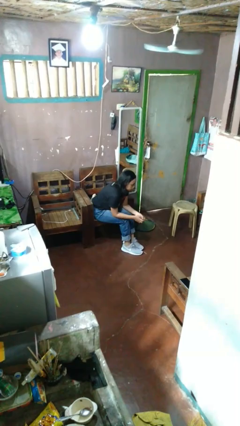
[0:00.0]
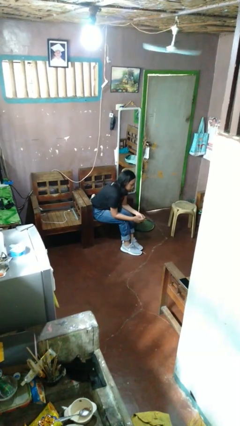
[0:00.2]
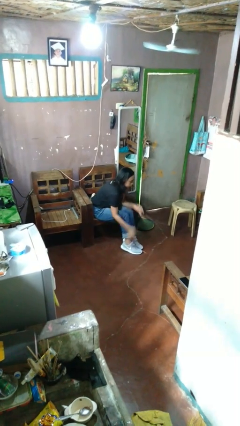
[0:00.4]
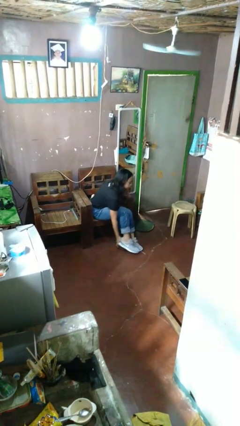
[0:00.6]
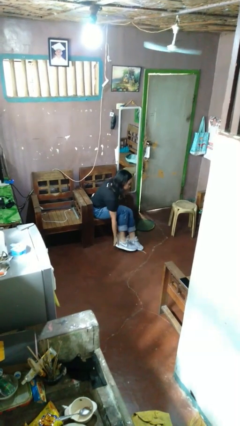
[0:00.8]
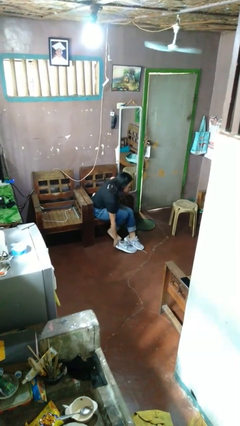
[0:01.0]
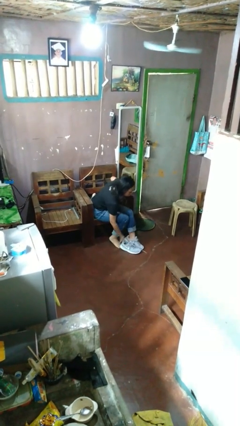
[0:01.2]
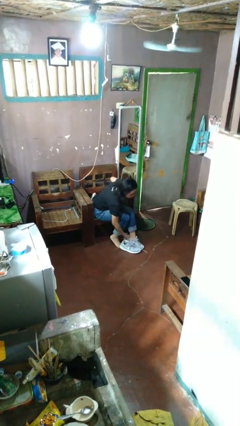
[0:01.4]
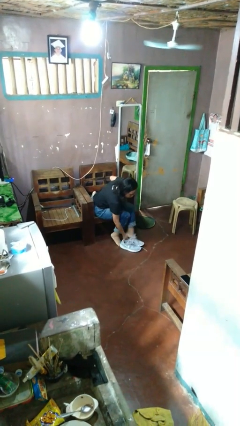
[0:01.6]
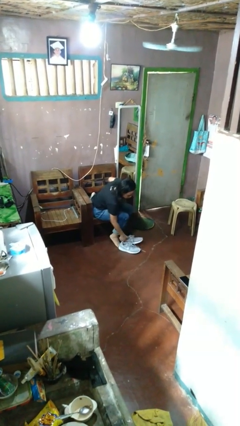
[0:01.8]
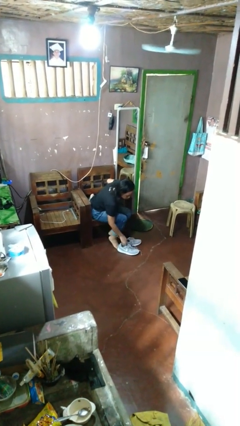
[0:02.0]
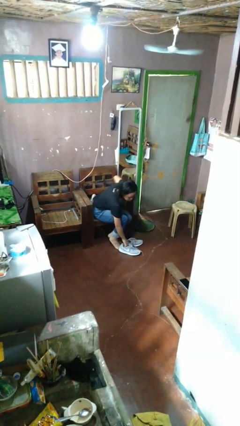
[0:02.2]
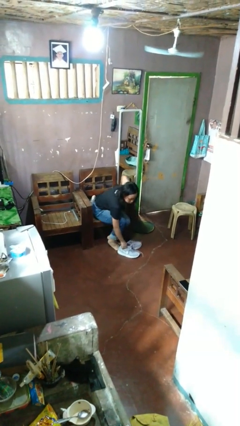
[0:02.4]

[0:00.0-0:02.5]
person takes off shoes

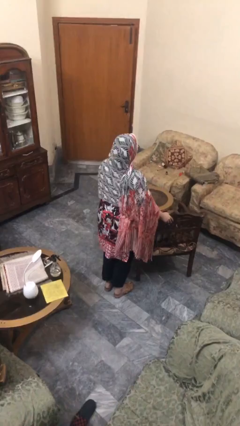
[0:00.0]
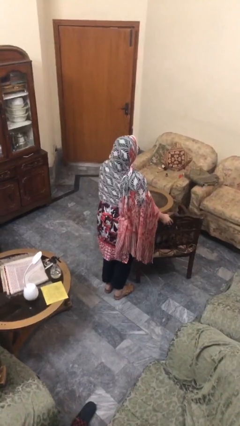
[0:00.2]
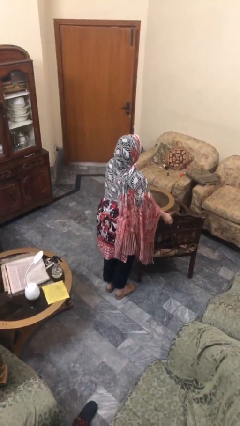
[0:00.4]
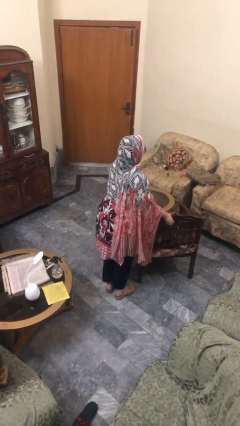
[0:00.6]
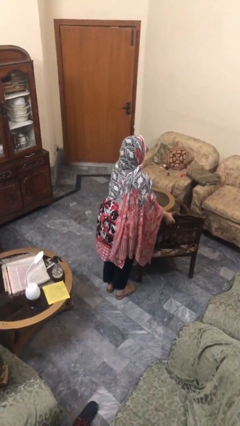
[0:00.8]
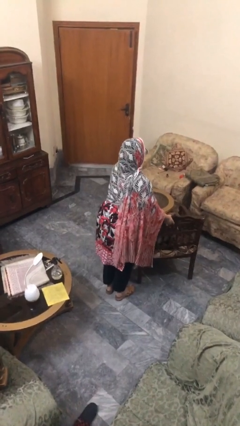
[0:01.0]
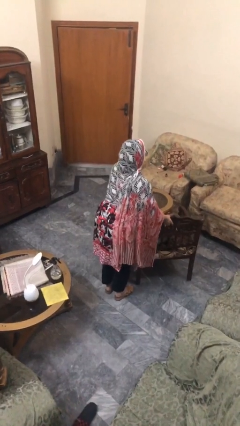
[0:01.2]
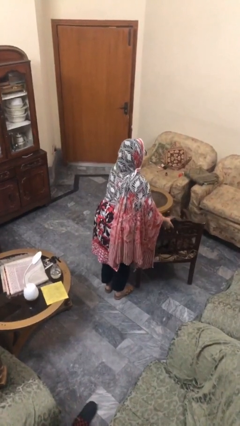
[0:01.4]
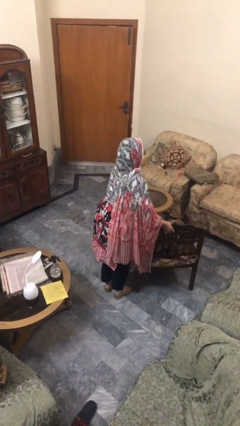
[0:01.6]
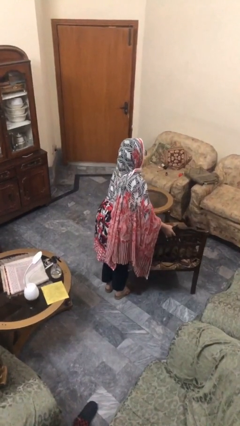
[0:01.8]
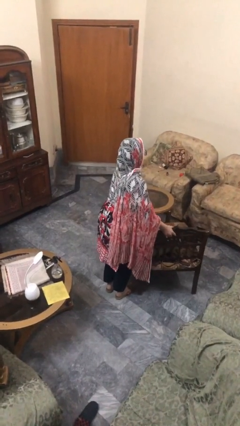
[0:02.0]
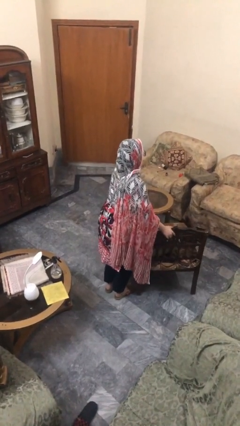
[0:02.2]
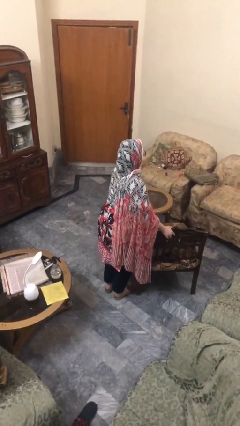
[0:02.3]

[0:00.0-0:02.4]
person pulls out chair

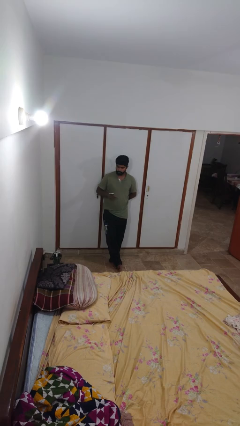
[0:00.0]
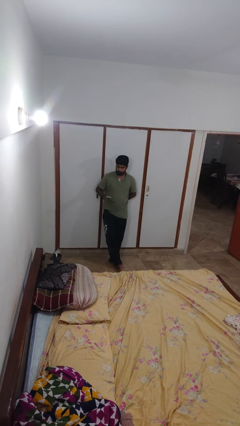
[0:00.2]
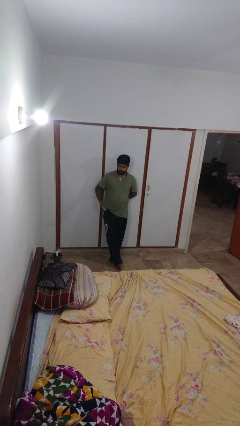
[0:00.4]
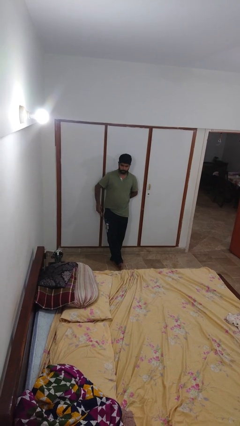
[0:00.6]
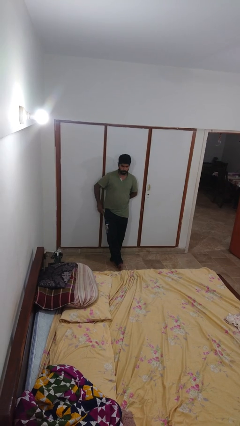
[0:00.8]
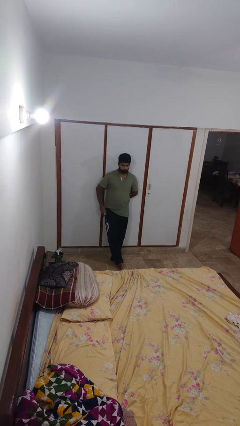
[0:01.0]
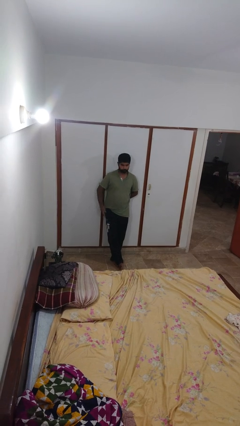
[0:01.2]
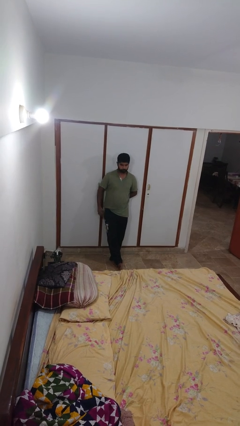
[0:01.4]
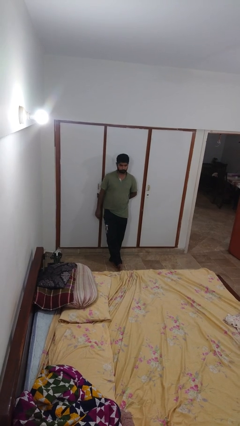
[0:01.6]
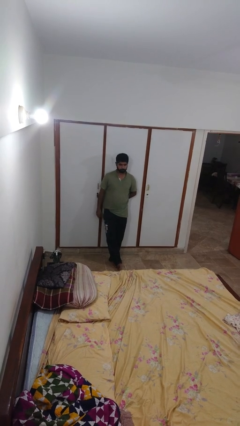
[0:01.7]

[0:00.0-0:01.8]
person puts phone into pocket

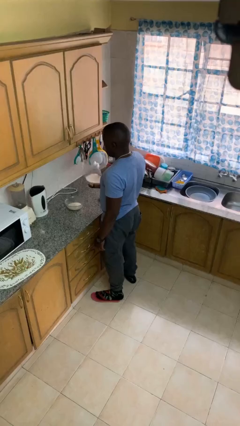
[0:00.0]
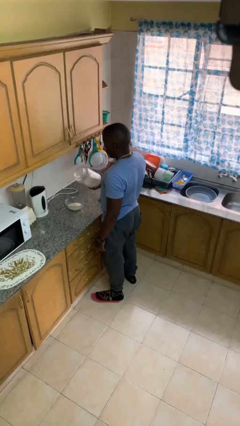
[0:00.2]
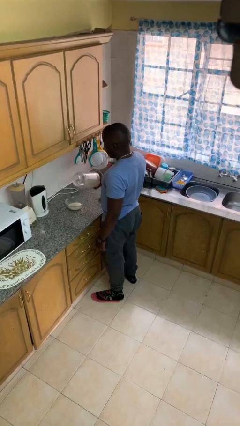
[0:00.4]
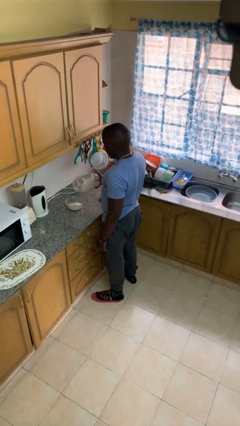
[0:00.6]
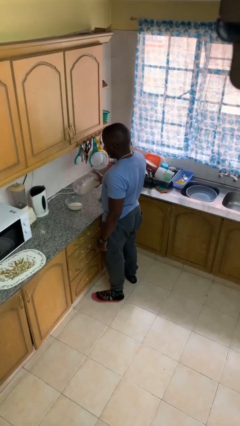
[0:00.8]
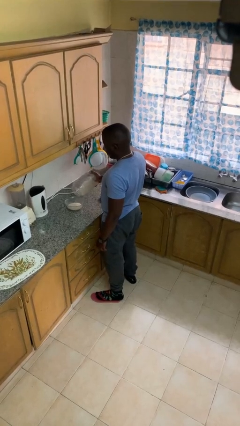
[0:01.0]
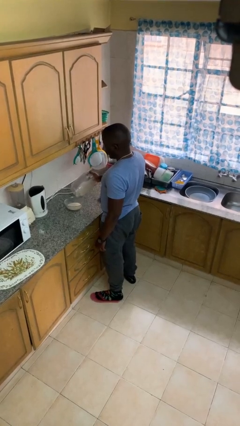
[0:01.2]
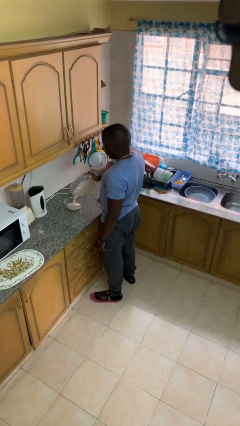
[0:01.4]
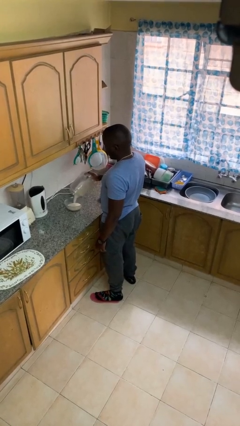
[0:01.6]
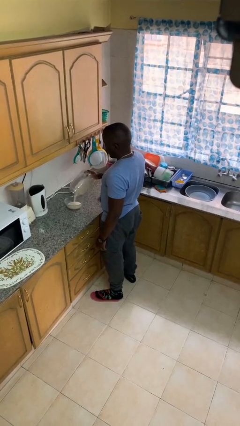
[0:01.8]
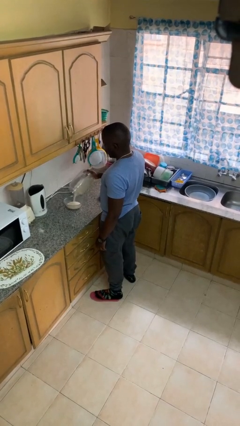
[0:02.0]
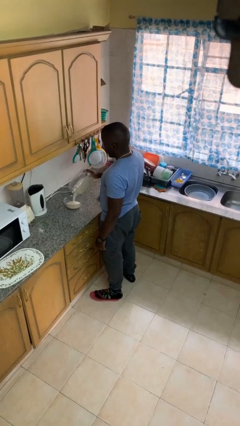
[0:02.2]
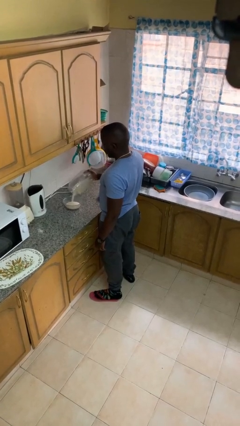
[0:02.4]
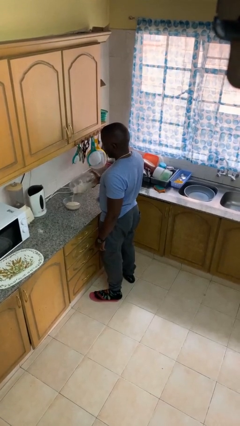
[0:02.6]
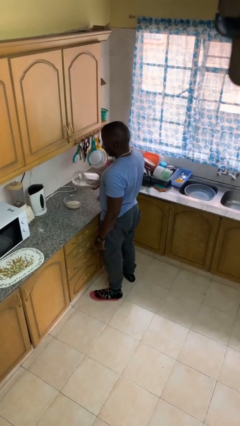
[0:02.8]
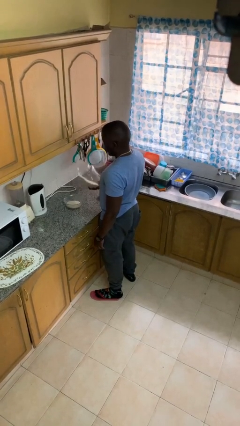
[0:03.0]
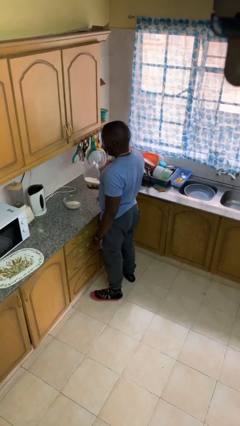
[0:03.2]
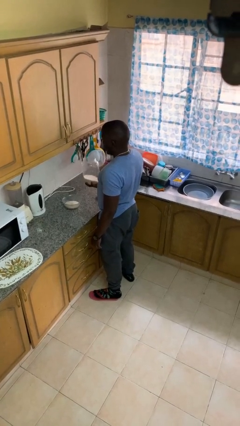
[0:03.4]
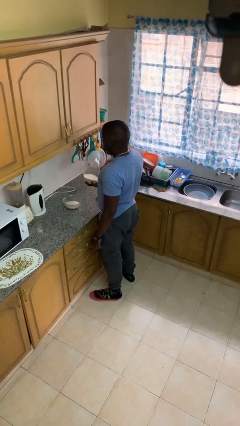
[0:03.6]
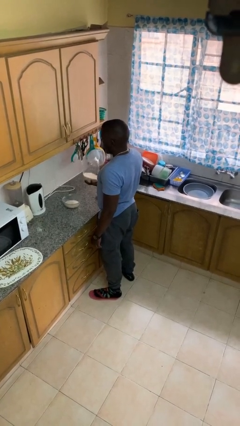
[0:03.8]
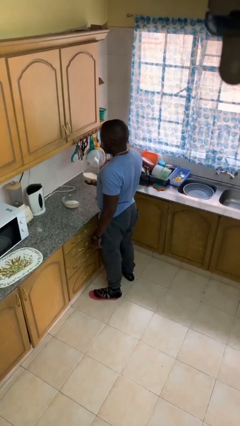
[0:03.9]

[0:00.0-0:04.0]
person pours into bowl

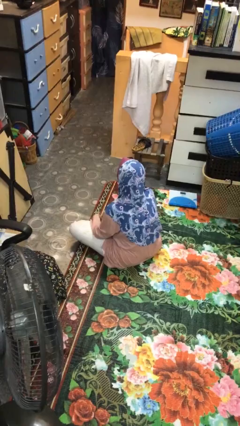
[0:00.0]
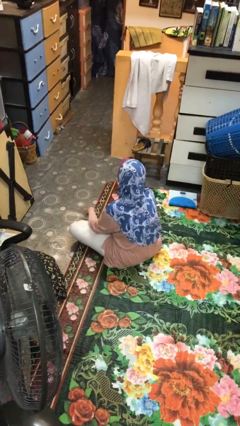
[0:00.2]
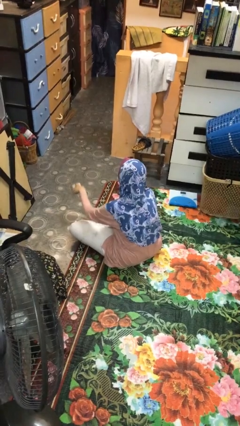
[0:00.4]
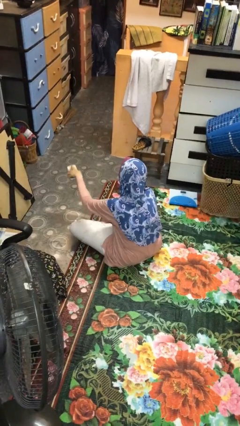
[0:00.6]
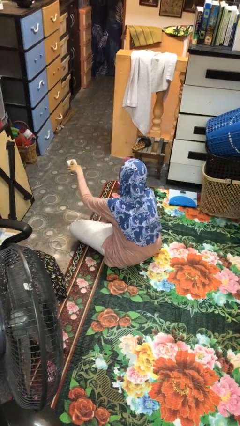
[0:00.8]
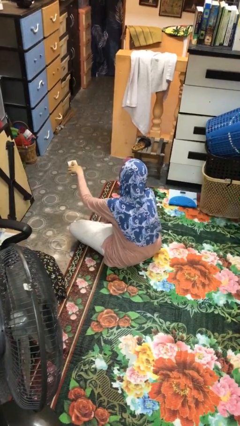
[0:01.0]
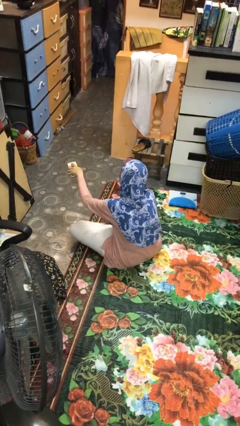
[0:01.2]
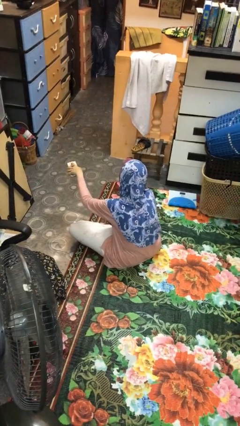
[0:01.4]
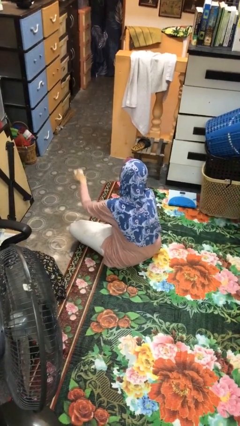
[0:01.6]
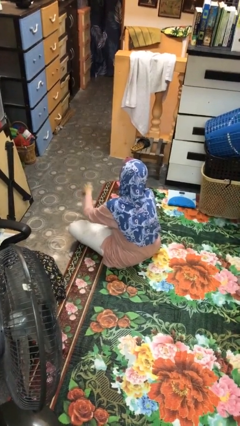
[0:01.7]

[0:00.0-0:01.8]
person uses television remote

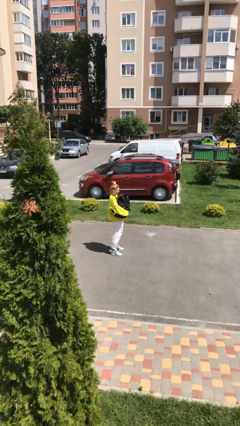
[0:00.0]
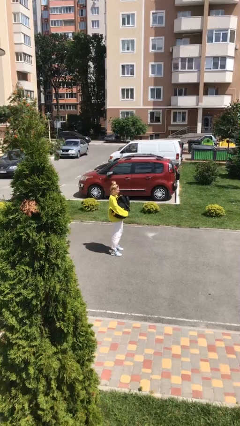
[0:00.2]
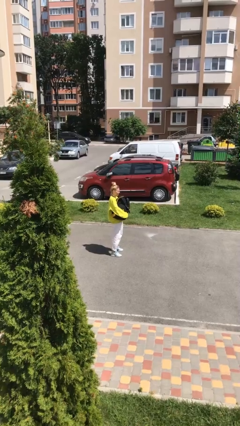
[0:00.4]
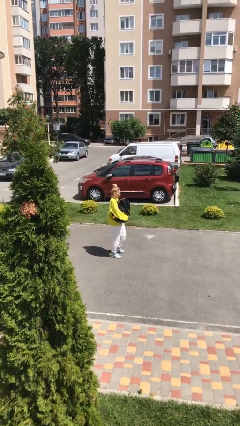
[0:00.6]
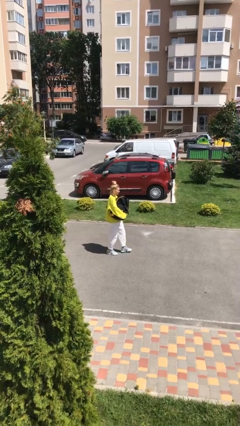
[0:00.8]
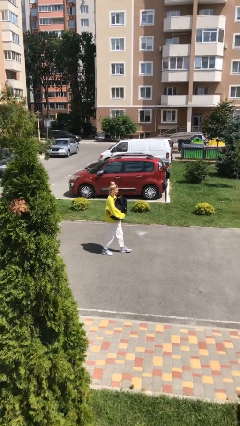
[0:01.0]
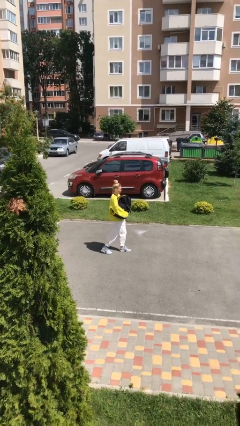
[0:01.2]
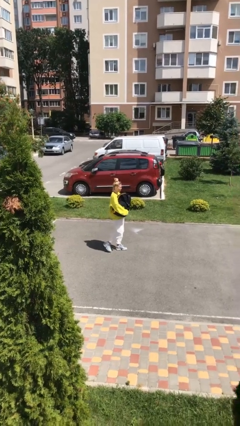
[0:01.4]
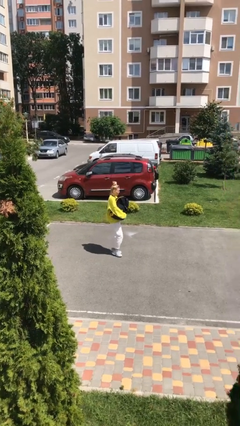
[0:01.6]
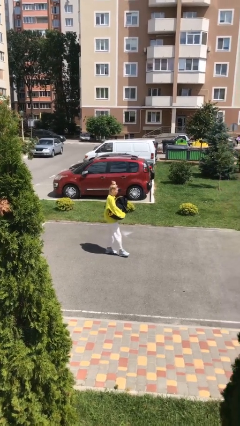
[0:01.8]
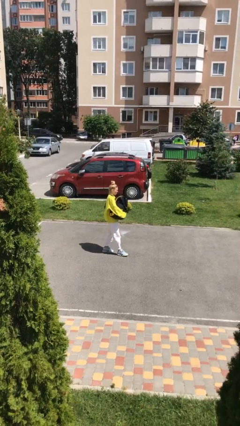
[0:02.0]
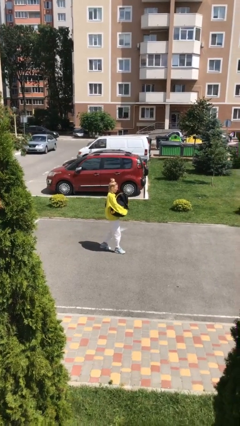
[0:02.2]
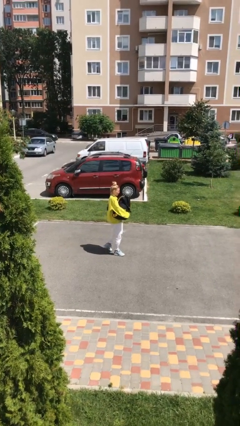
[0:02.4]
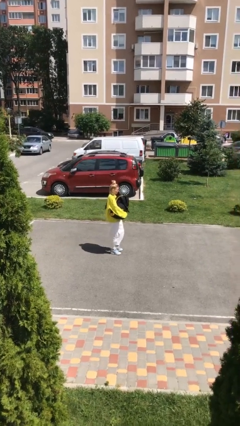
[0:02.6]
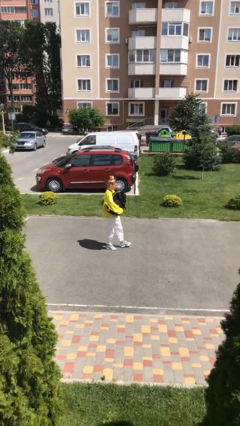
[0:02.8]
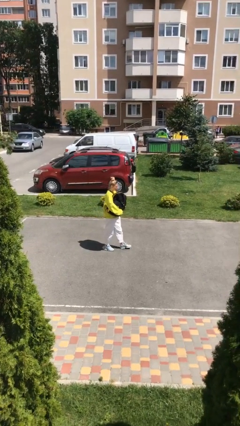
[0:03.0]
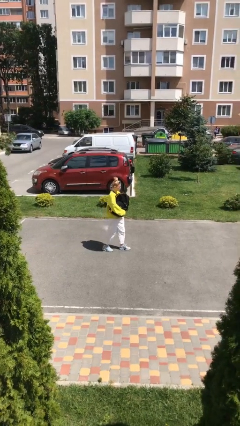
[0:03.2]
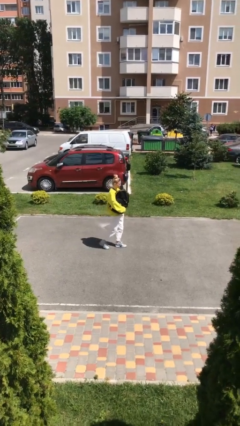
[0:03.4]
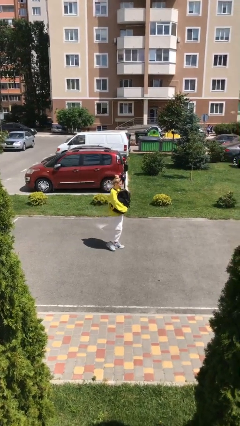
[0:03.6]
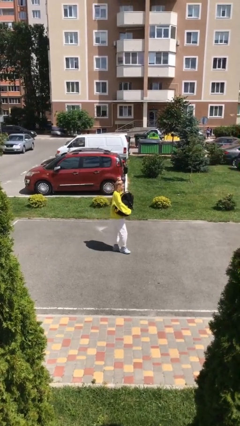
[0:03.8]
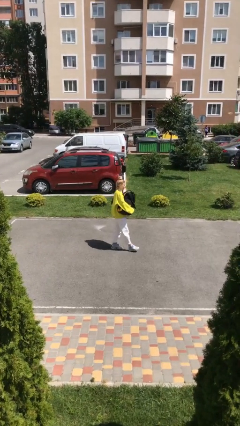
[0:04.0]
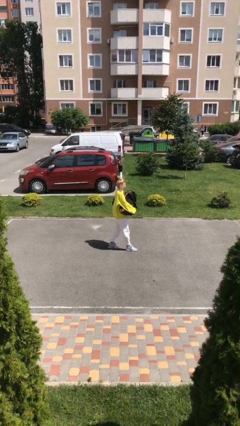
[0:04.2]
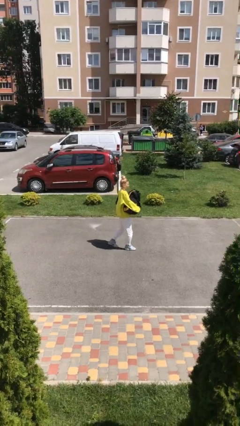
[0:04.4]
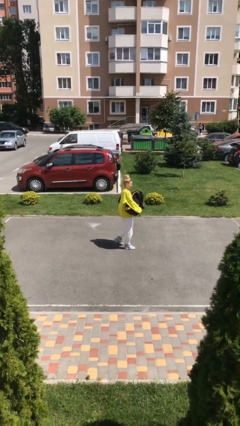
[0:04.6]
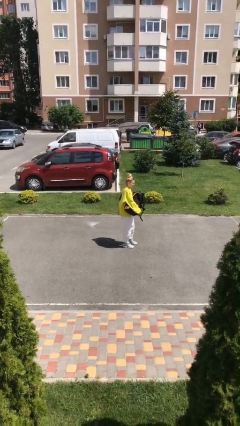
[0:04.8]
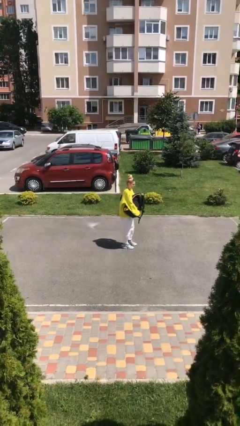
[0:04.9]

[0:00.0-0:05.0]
person carries heavy object

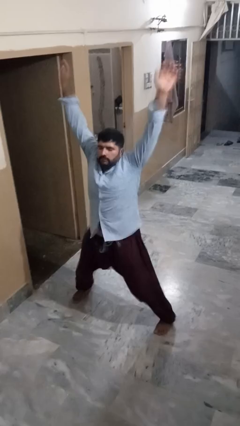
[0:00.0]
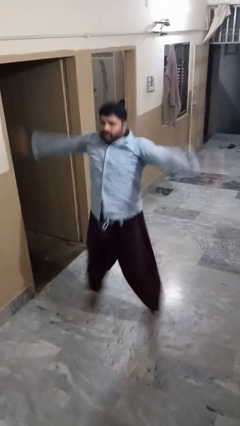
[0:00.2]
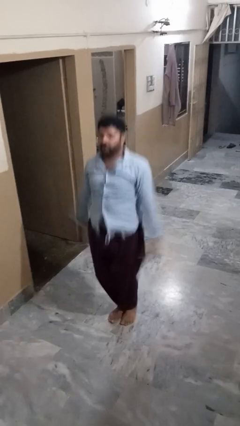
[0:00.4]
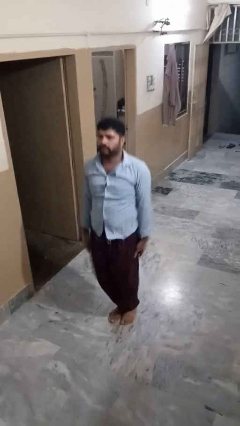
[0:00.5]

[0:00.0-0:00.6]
person exercises with jumping jacks
